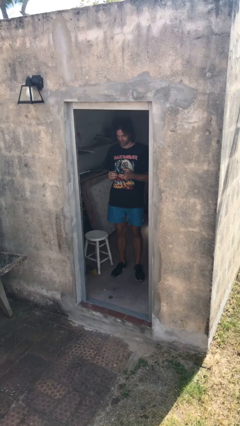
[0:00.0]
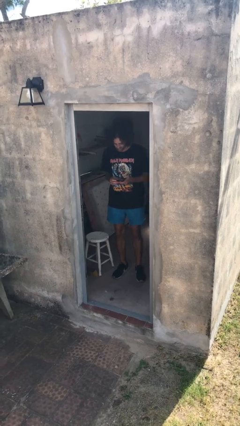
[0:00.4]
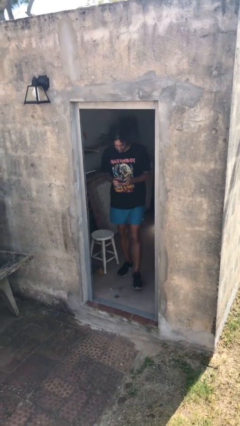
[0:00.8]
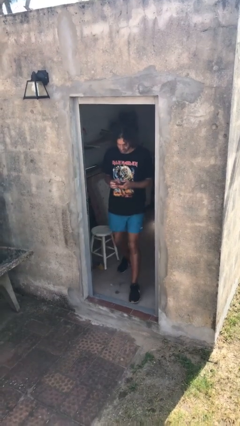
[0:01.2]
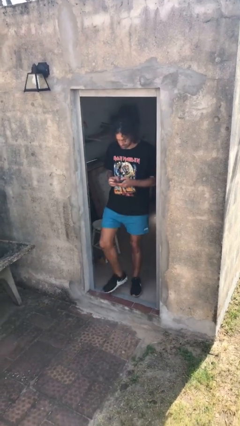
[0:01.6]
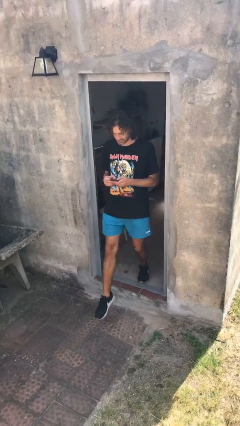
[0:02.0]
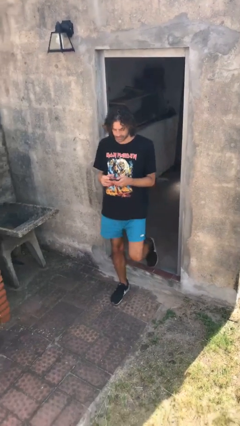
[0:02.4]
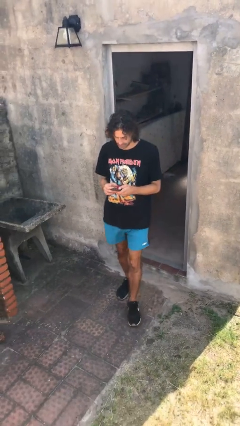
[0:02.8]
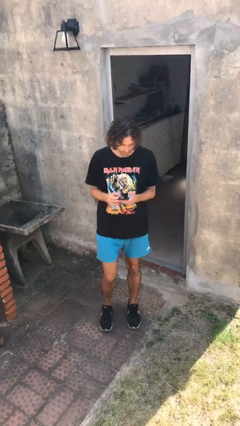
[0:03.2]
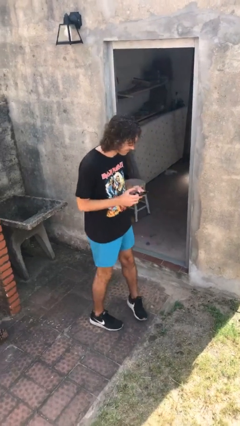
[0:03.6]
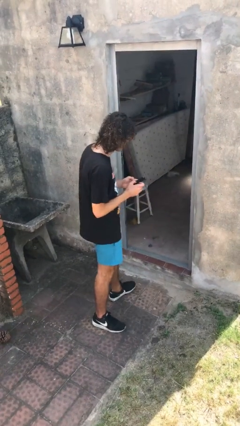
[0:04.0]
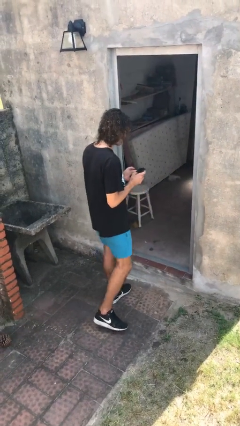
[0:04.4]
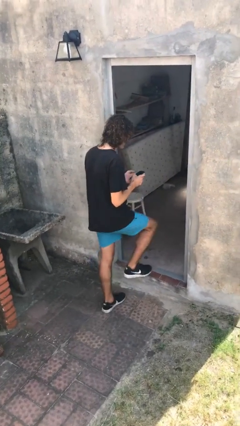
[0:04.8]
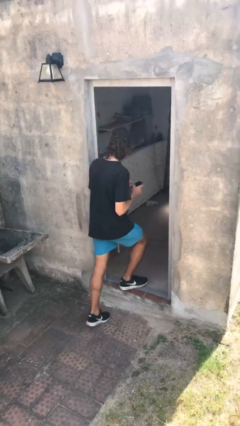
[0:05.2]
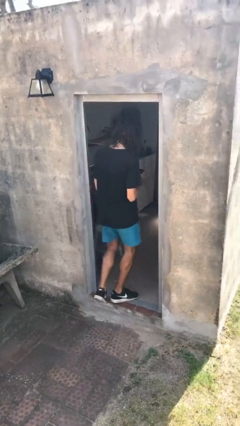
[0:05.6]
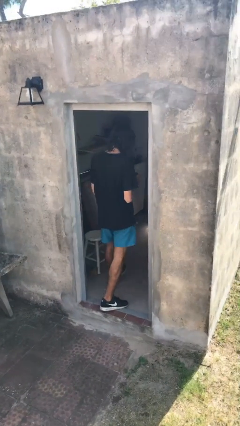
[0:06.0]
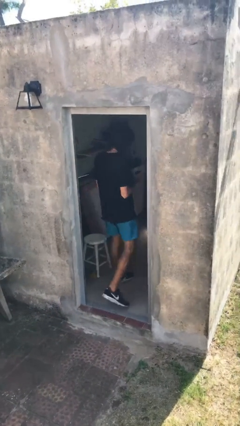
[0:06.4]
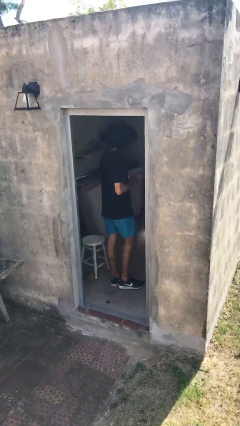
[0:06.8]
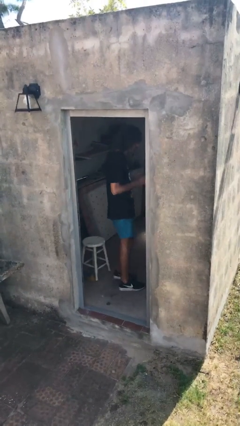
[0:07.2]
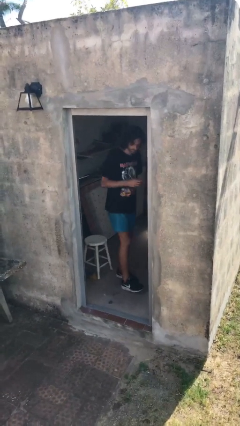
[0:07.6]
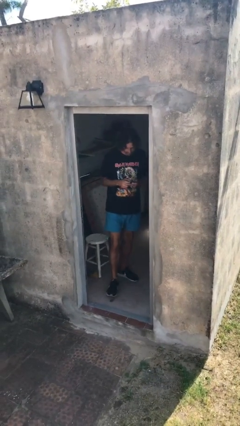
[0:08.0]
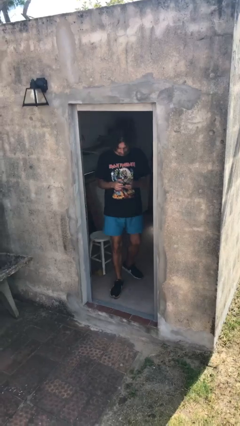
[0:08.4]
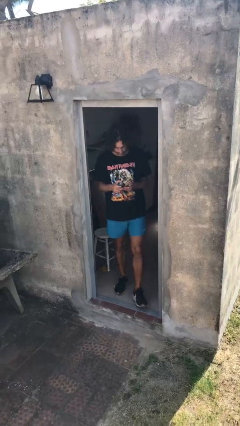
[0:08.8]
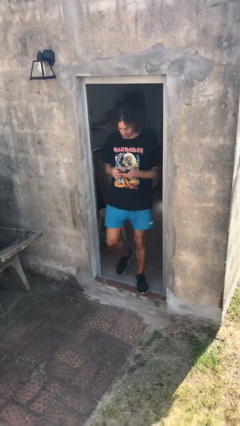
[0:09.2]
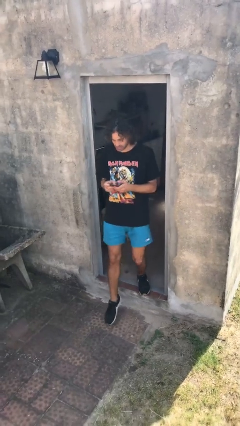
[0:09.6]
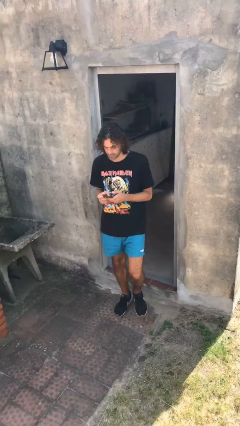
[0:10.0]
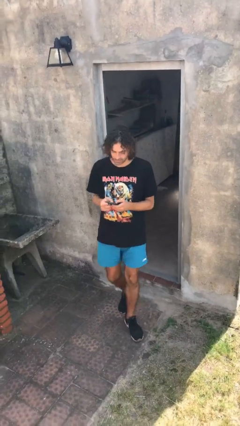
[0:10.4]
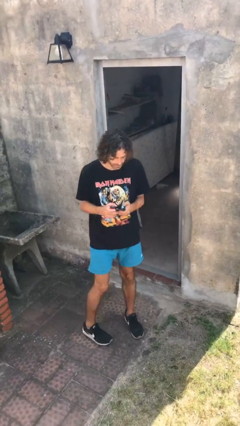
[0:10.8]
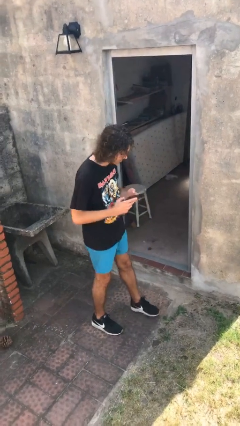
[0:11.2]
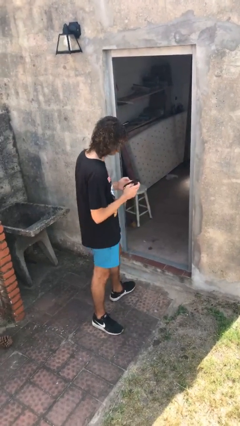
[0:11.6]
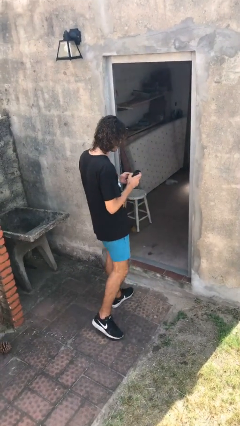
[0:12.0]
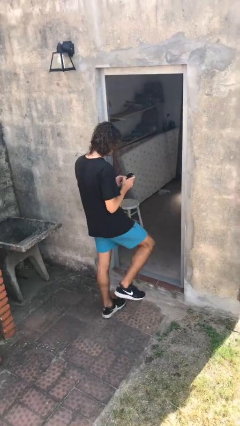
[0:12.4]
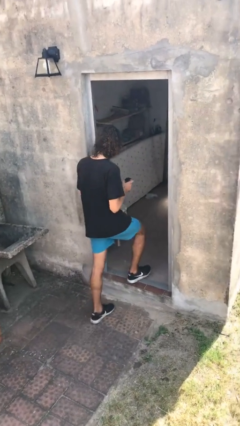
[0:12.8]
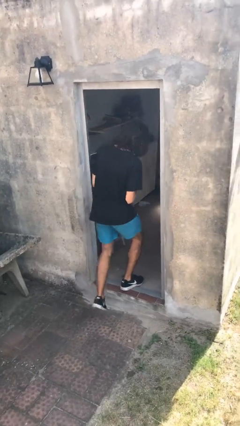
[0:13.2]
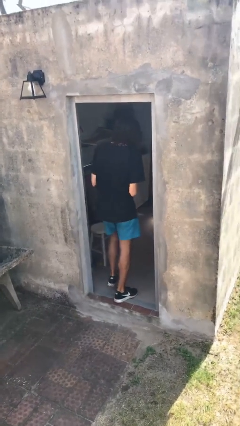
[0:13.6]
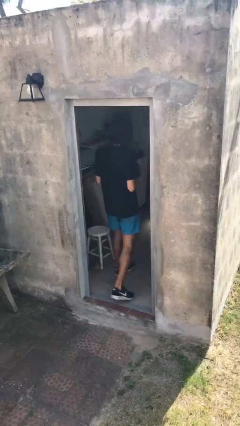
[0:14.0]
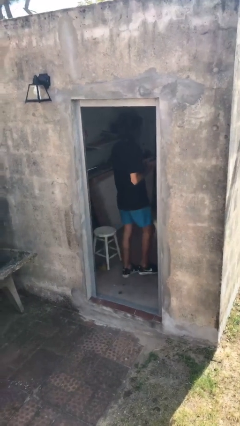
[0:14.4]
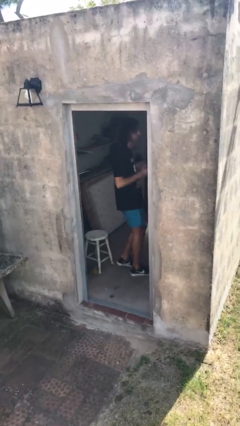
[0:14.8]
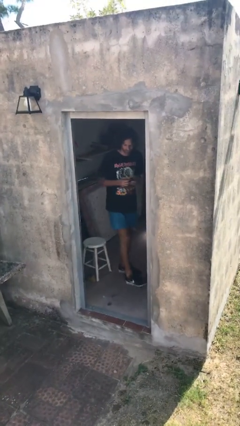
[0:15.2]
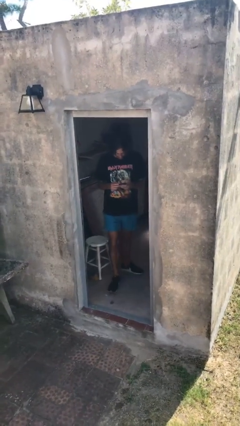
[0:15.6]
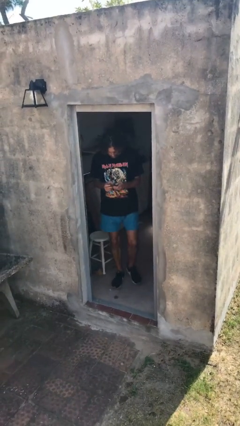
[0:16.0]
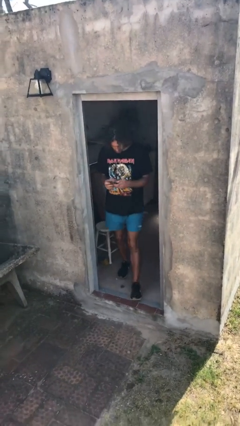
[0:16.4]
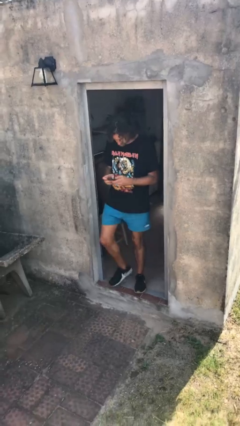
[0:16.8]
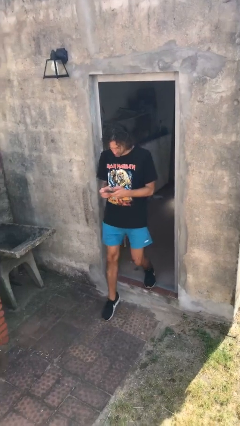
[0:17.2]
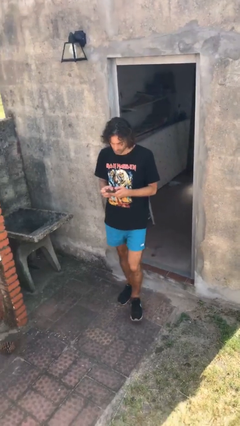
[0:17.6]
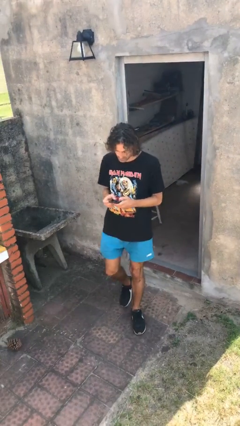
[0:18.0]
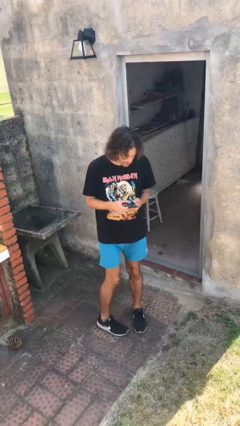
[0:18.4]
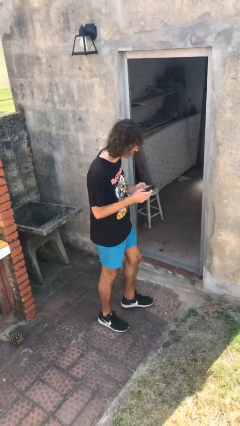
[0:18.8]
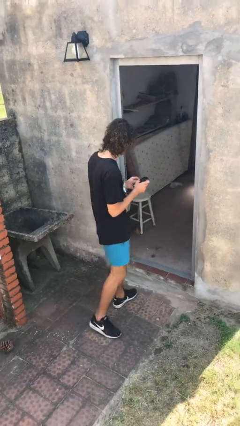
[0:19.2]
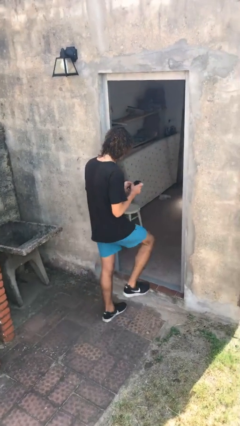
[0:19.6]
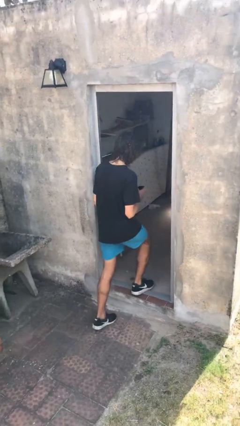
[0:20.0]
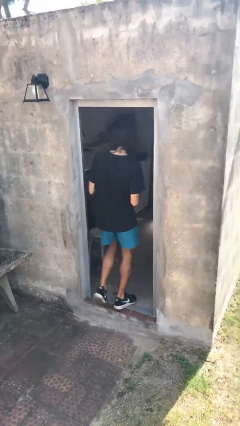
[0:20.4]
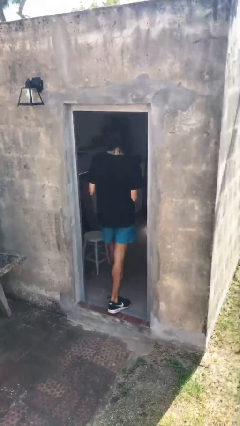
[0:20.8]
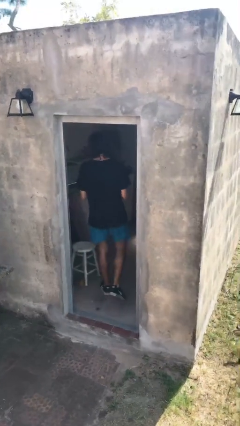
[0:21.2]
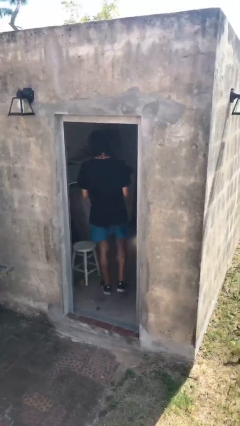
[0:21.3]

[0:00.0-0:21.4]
person texts on phone

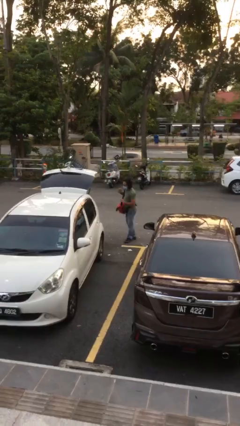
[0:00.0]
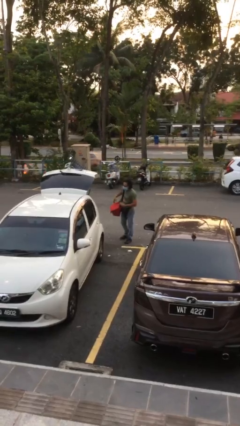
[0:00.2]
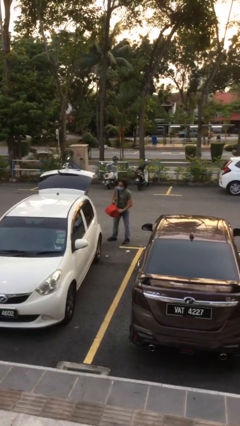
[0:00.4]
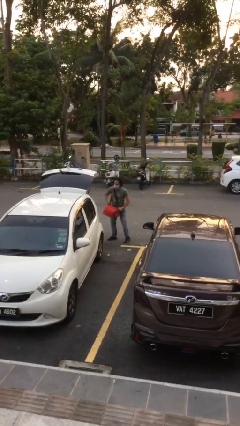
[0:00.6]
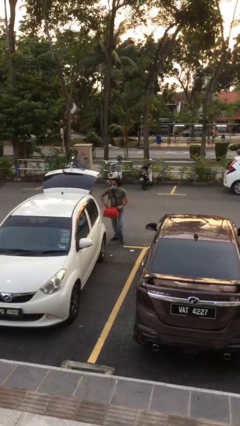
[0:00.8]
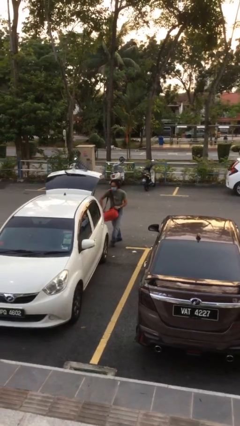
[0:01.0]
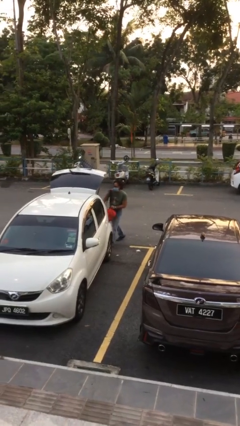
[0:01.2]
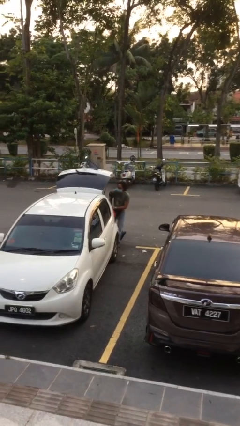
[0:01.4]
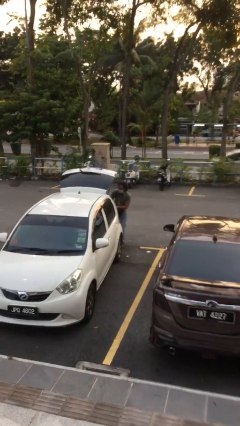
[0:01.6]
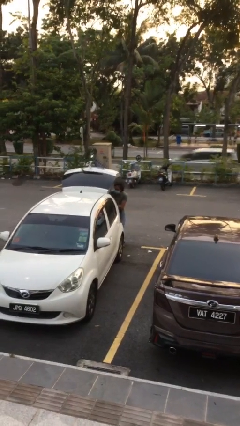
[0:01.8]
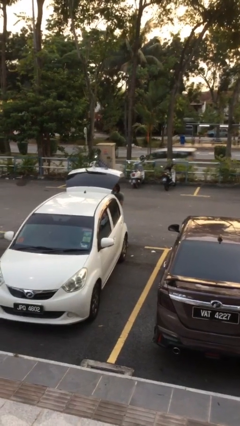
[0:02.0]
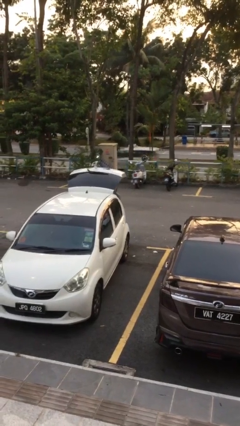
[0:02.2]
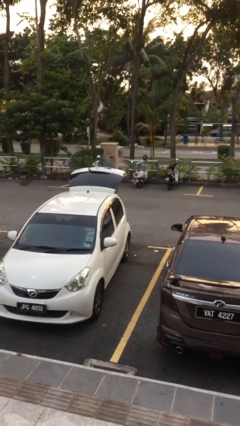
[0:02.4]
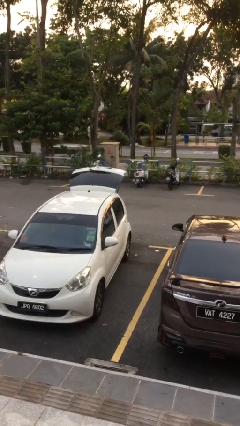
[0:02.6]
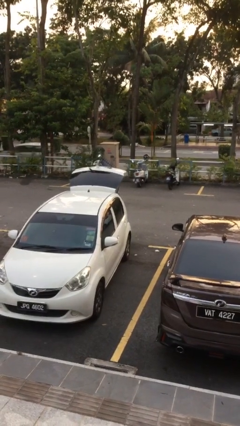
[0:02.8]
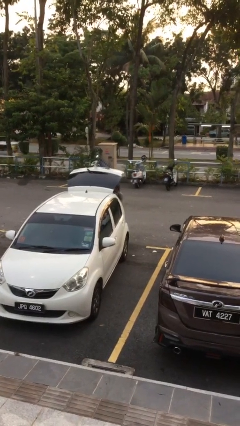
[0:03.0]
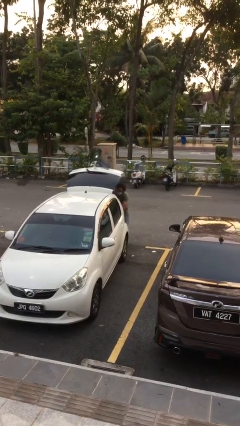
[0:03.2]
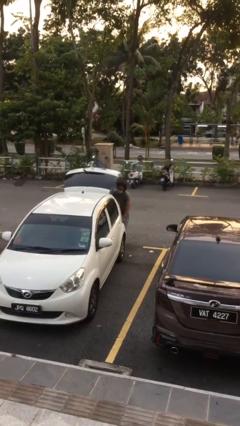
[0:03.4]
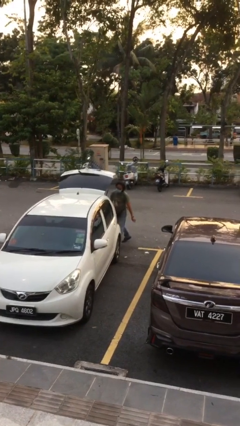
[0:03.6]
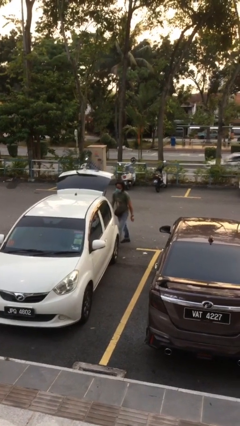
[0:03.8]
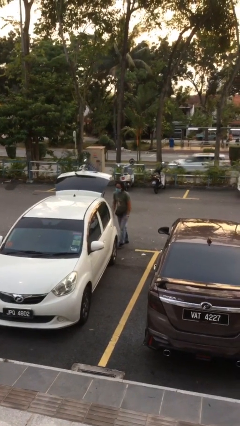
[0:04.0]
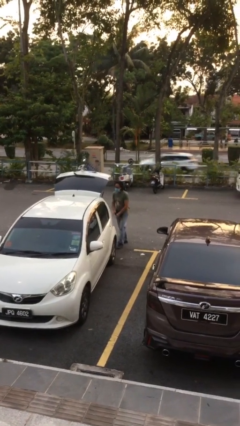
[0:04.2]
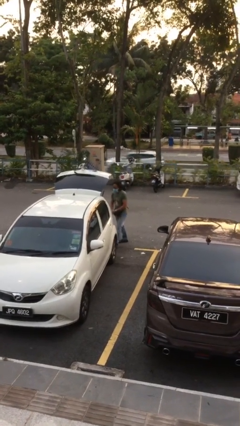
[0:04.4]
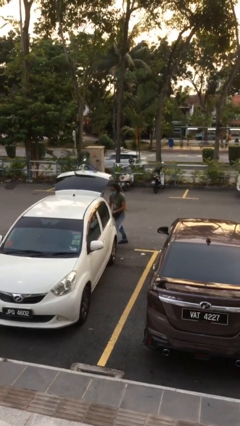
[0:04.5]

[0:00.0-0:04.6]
person loads car

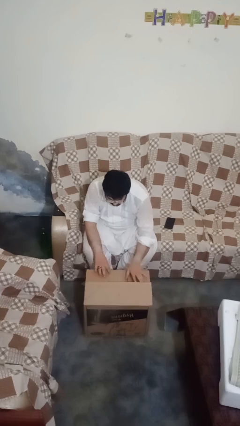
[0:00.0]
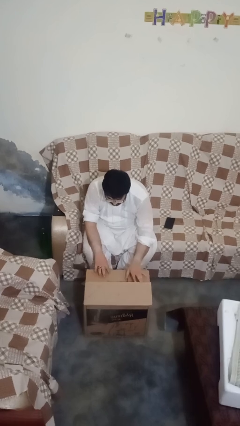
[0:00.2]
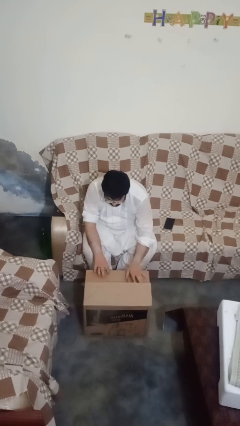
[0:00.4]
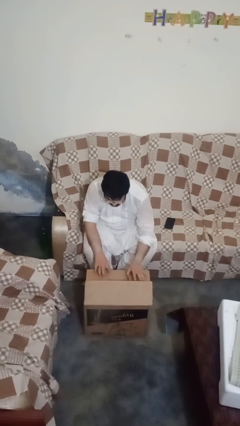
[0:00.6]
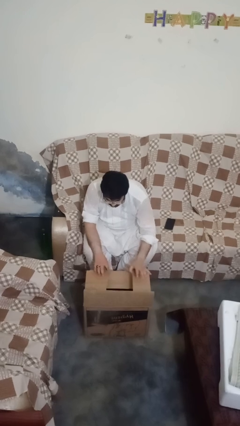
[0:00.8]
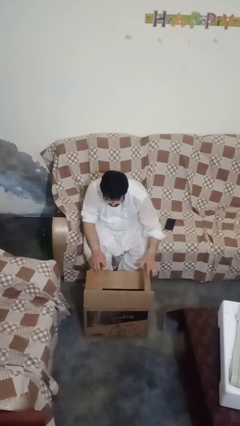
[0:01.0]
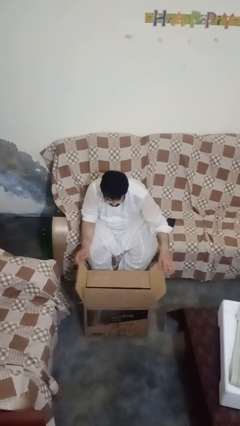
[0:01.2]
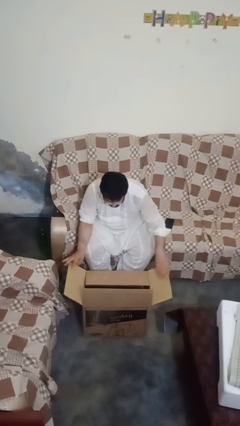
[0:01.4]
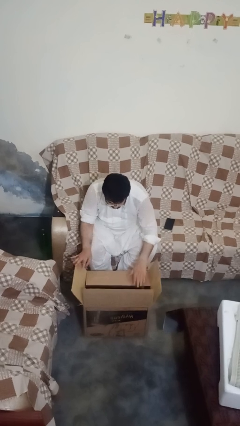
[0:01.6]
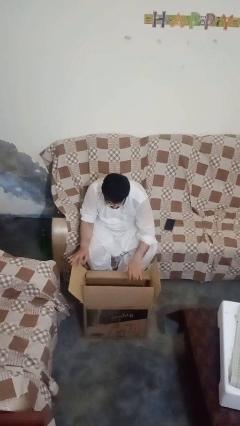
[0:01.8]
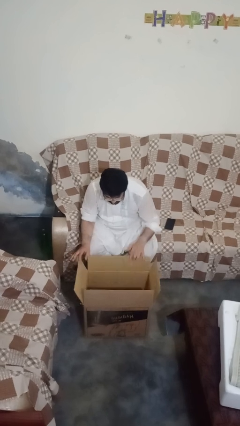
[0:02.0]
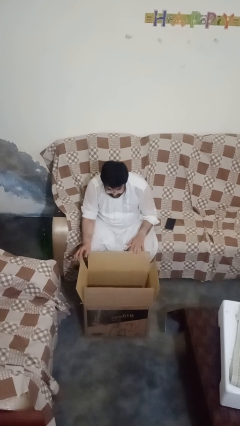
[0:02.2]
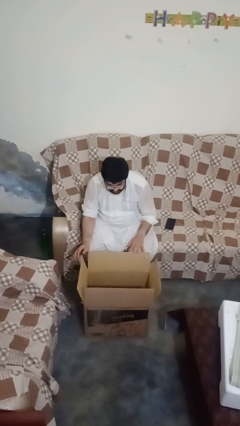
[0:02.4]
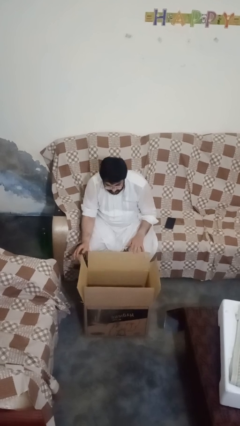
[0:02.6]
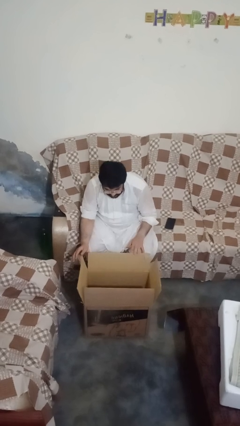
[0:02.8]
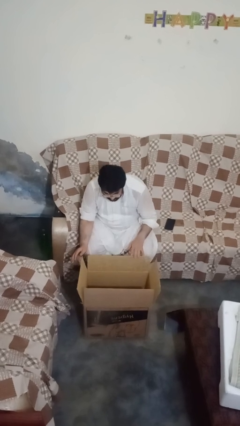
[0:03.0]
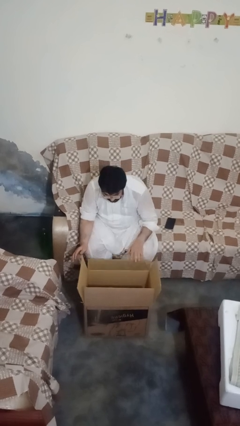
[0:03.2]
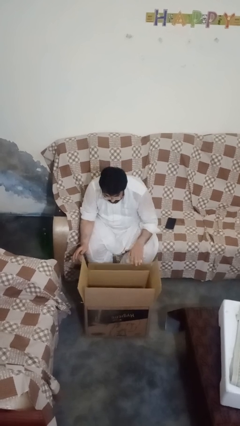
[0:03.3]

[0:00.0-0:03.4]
person opens box
